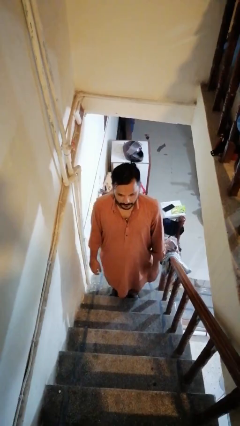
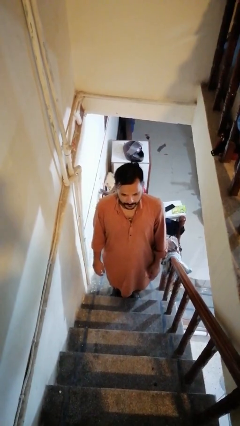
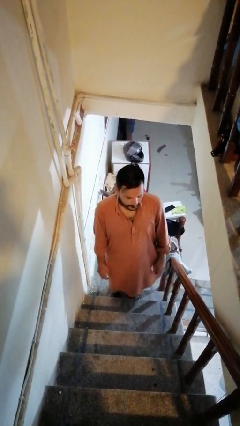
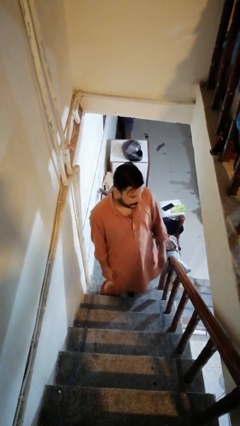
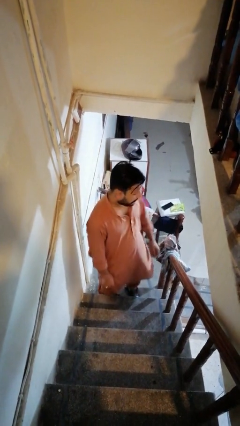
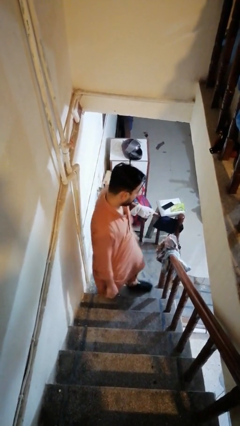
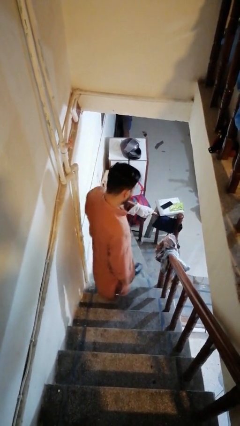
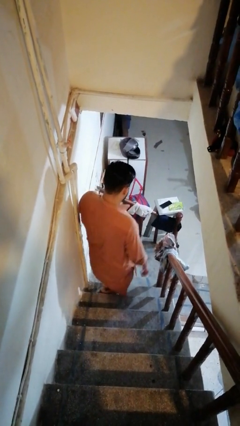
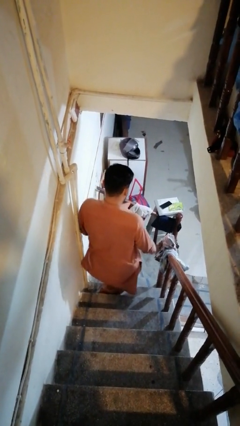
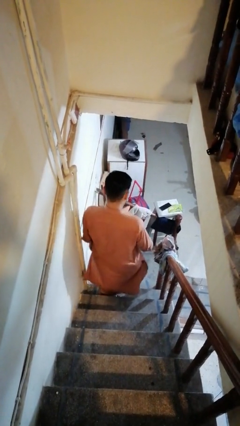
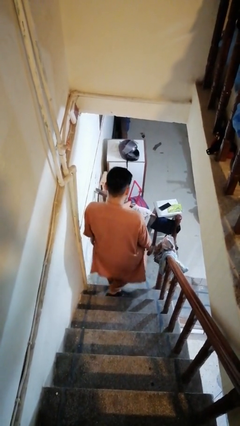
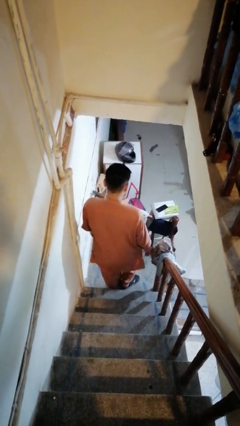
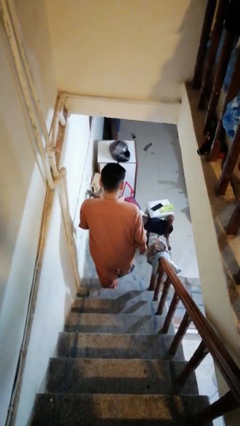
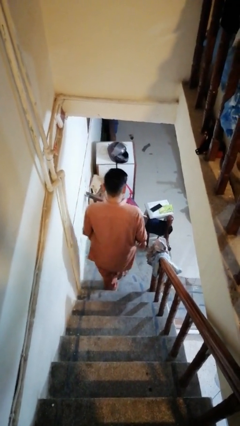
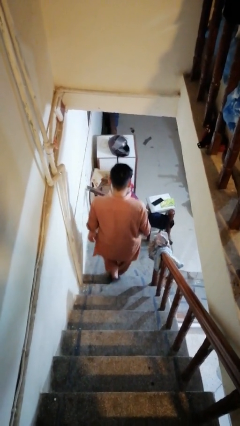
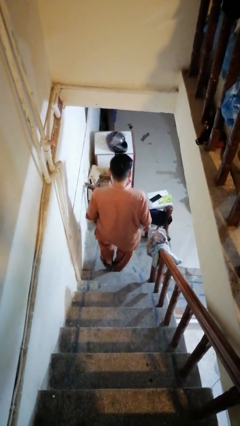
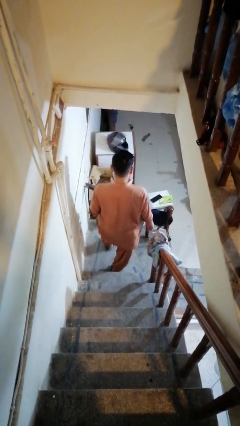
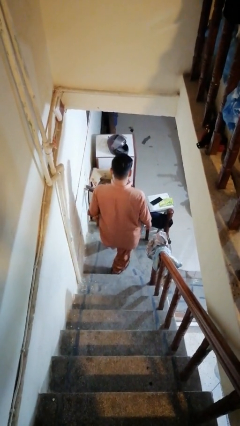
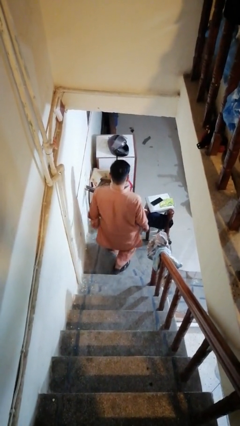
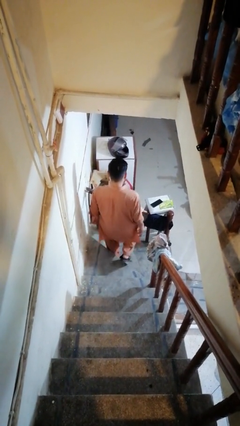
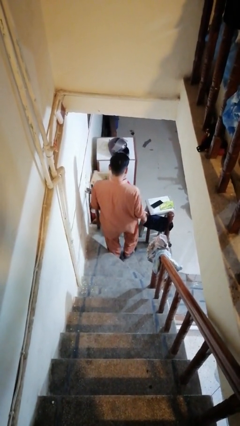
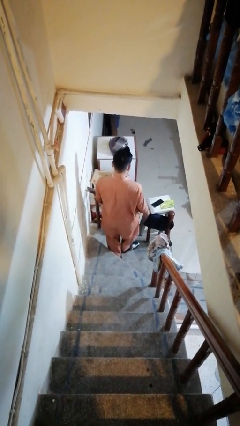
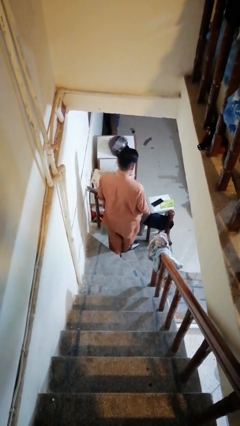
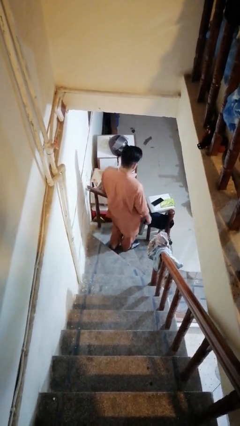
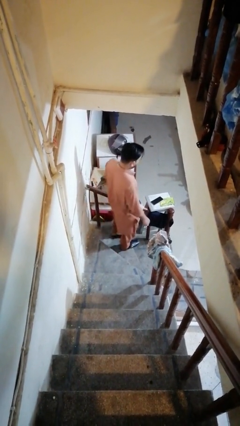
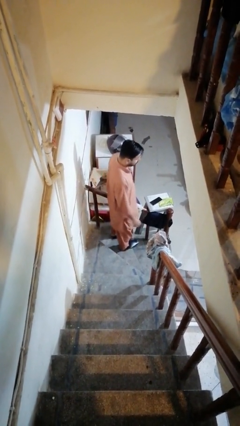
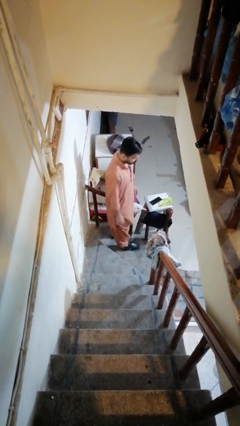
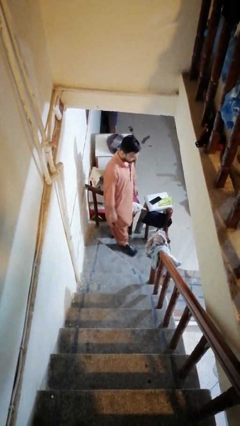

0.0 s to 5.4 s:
person climbs down stairs

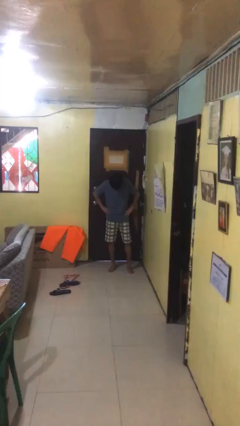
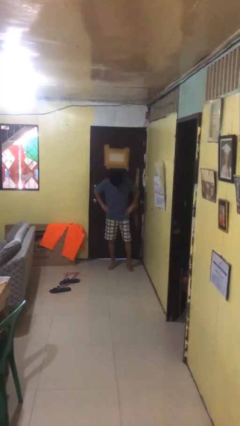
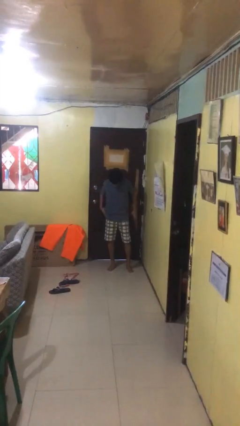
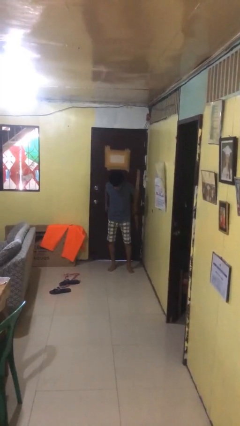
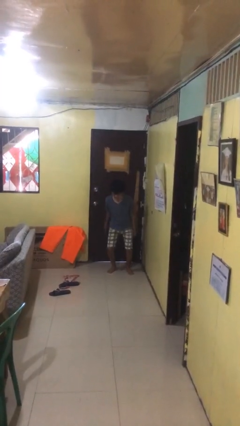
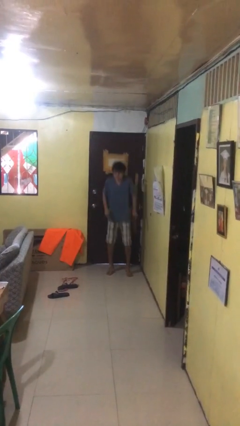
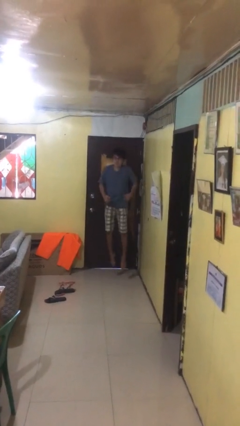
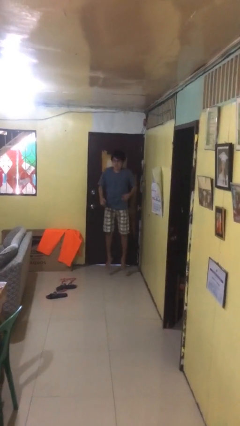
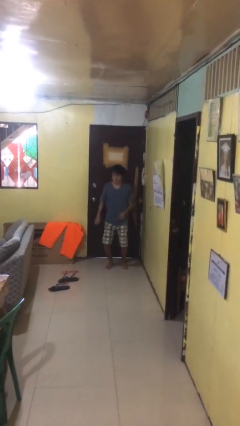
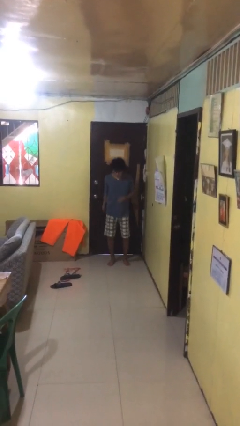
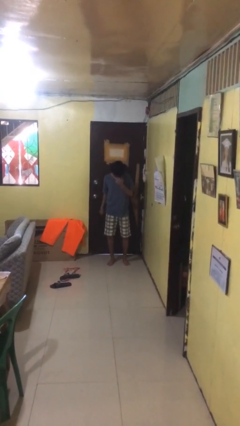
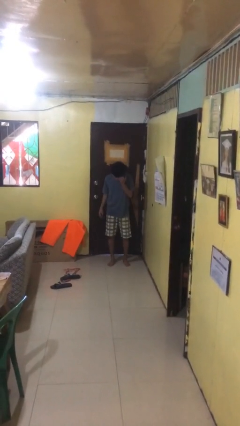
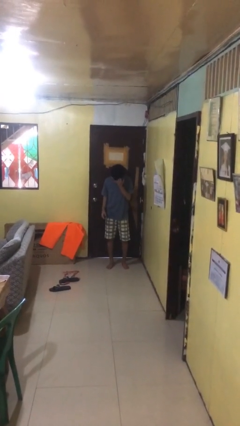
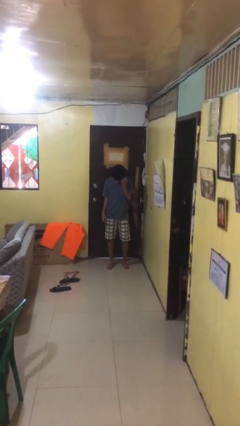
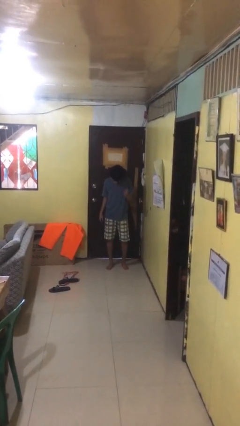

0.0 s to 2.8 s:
person jumps

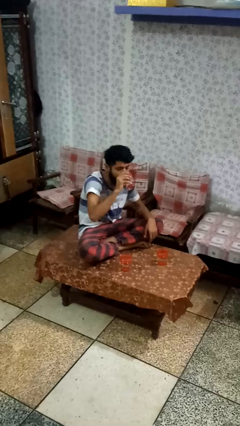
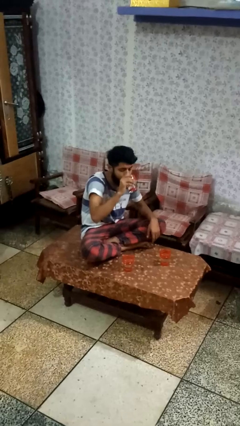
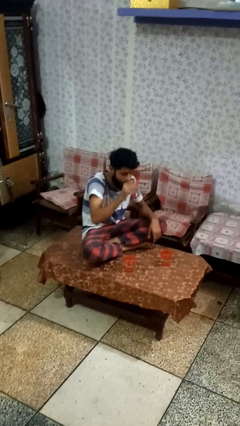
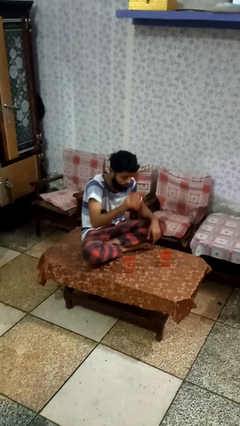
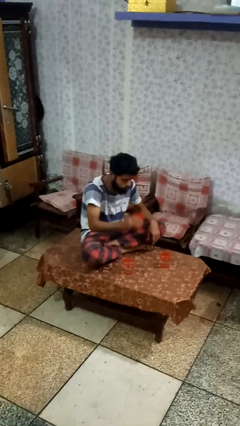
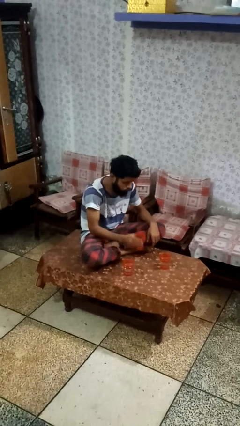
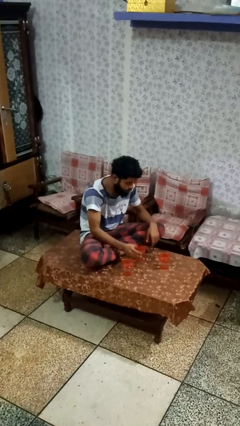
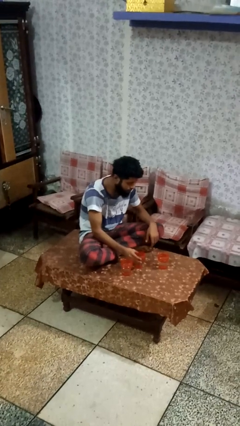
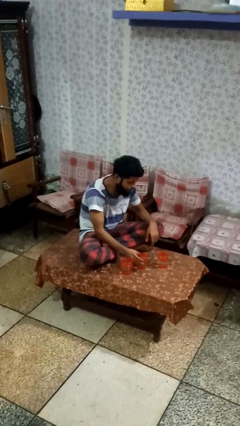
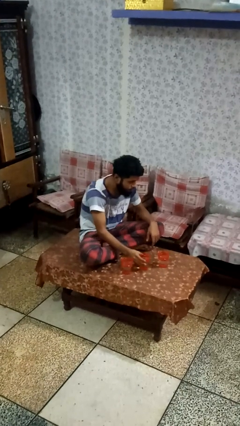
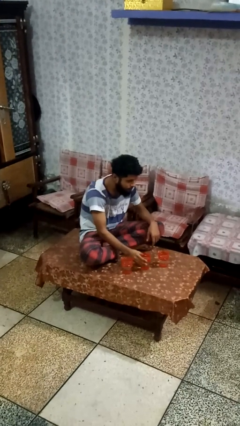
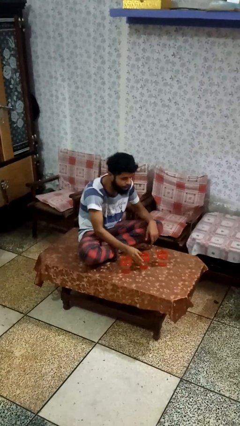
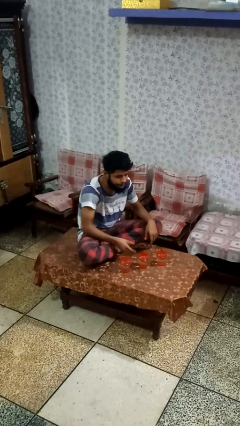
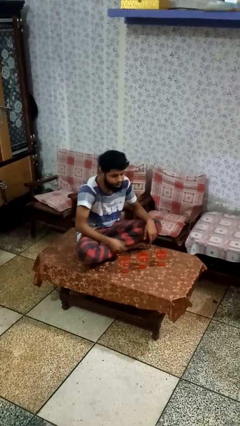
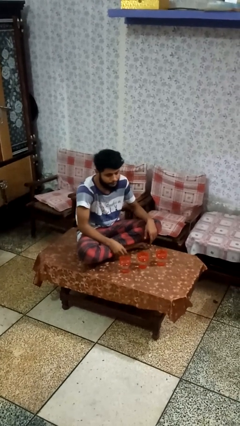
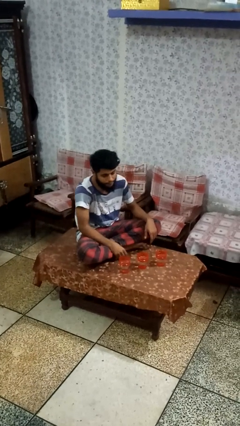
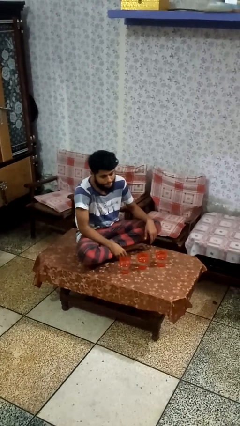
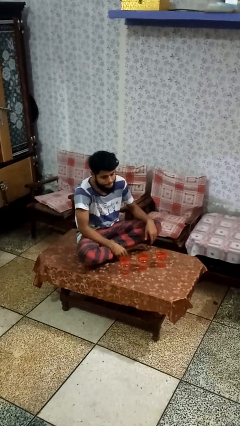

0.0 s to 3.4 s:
person puts down object on table

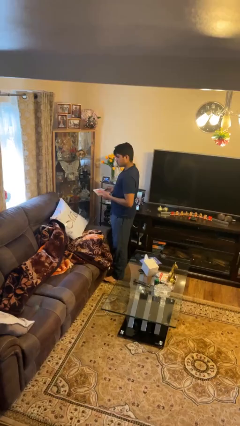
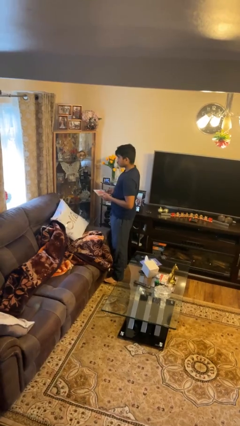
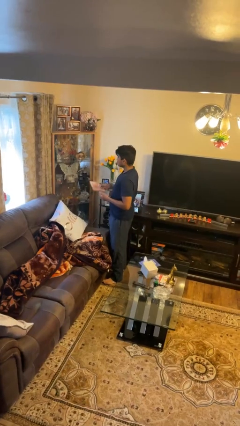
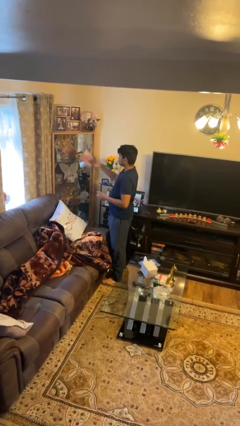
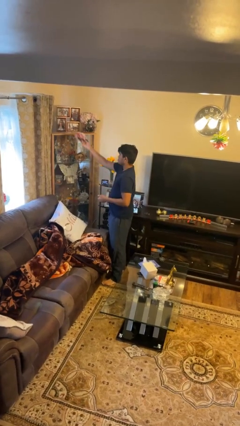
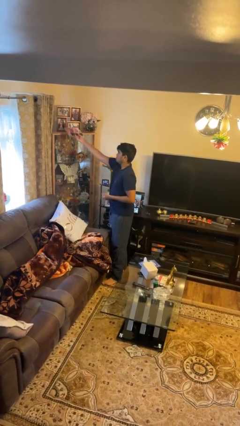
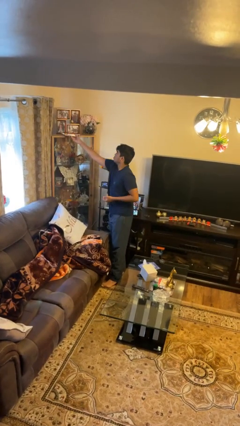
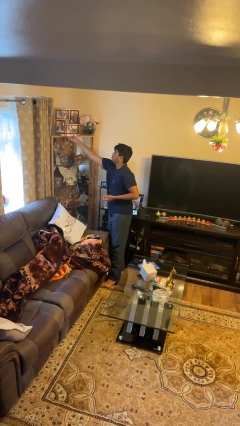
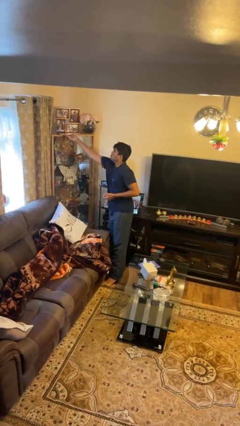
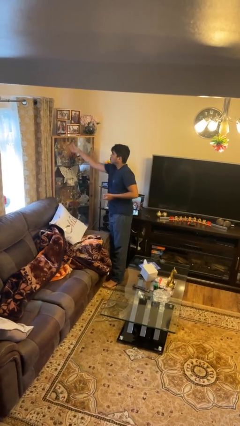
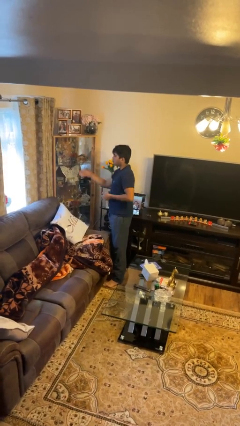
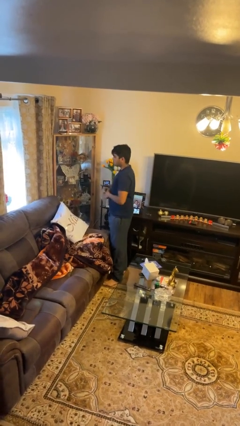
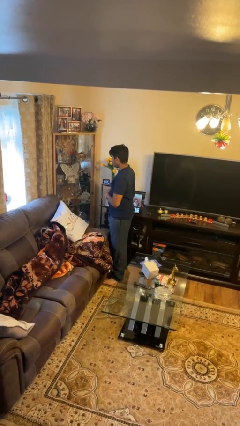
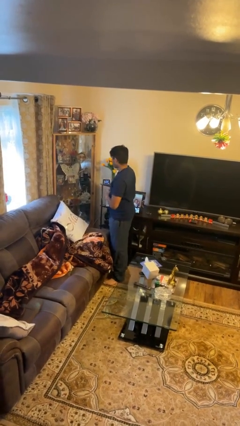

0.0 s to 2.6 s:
person puts down object on shelf

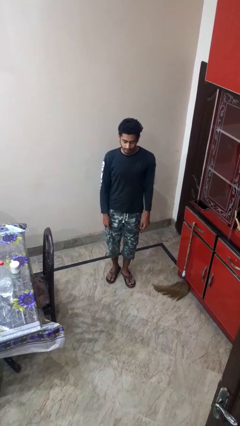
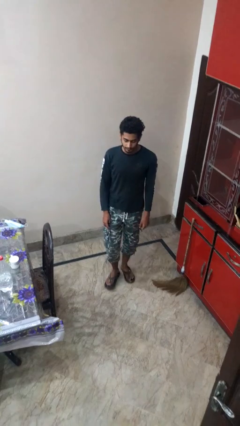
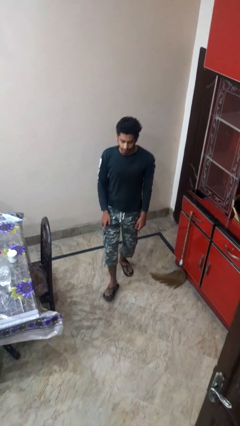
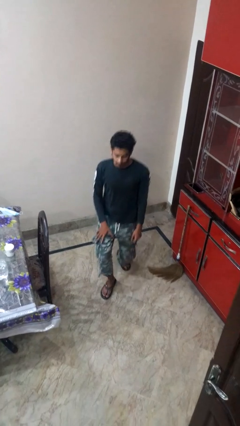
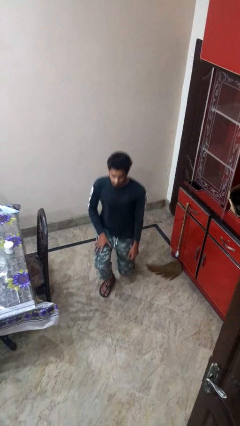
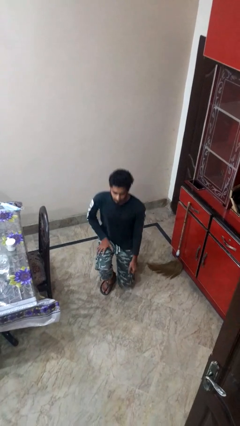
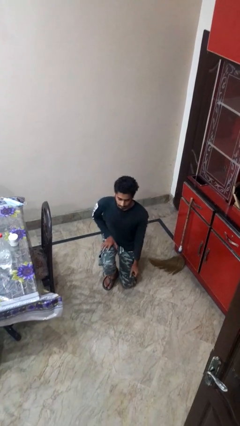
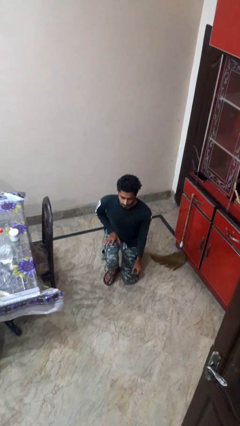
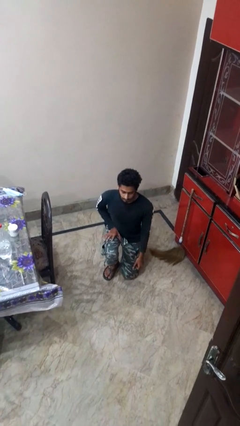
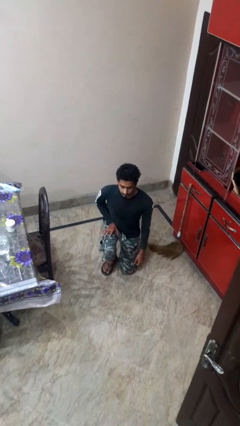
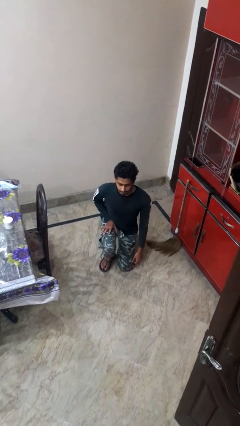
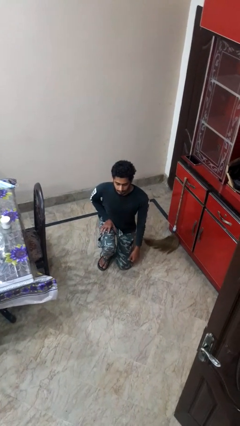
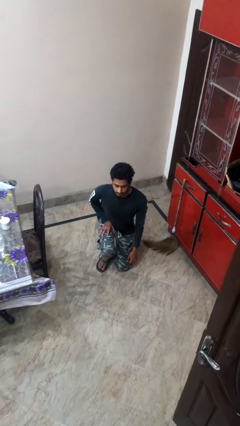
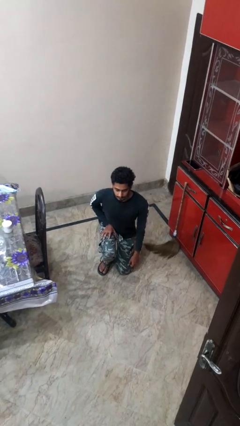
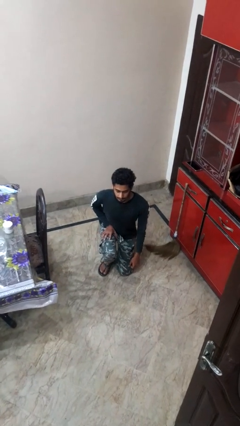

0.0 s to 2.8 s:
person kneels

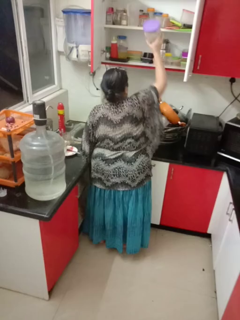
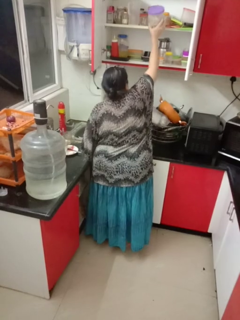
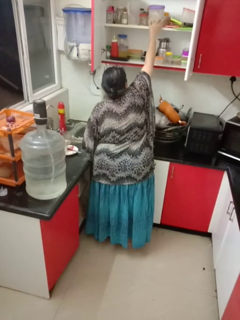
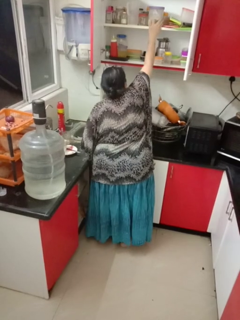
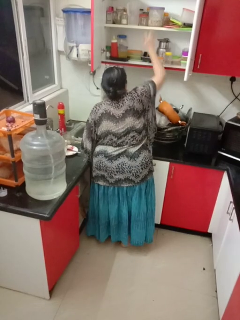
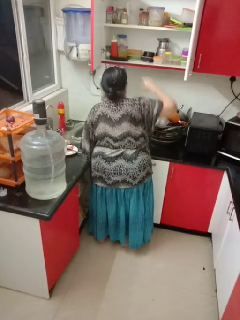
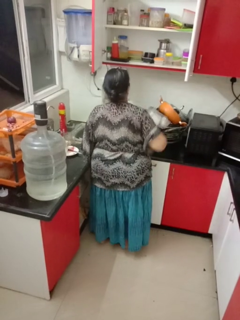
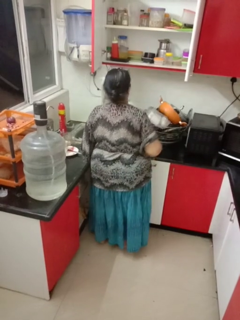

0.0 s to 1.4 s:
person puts object in cabinet
